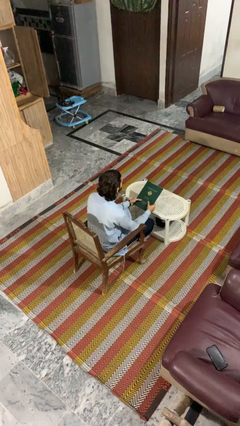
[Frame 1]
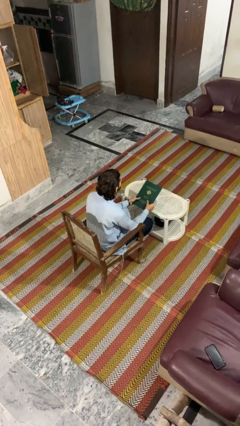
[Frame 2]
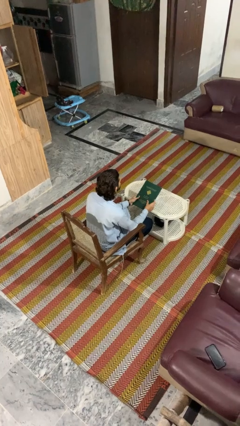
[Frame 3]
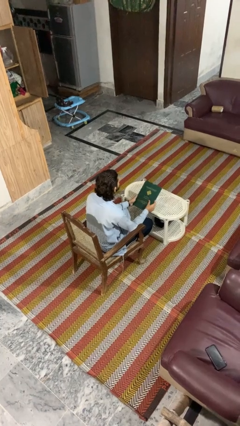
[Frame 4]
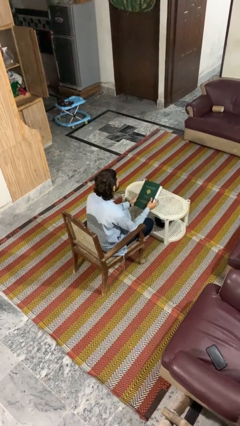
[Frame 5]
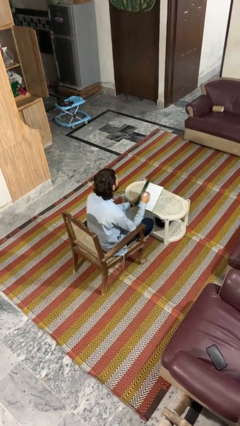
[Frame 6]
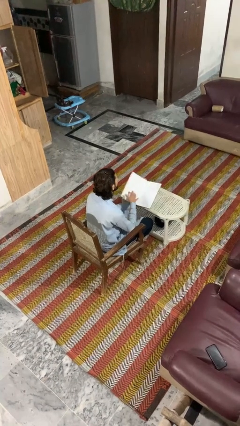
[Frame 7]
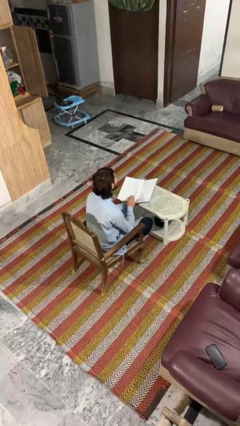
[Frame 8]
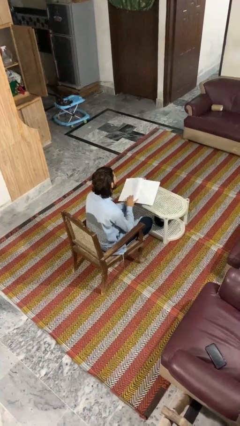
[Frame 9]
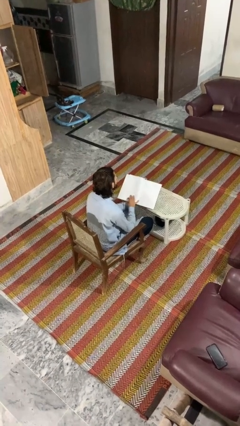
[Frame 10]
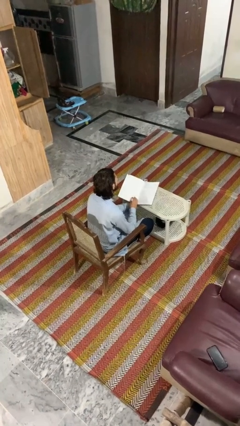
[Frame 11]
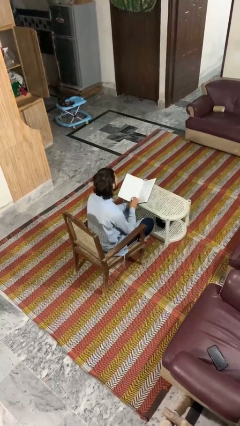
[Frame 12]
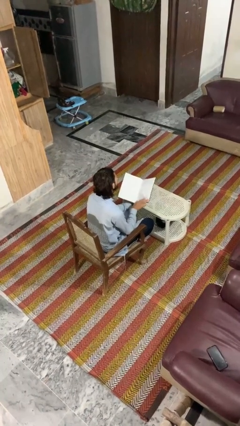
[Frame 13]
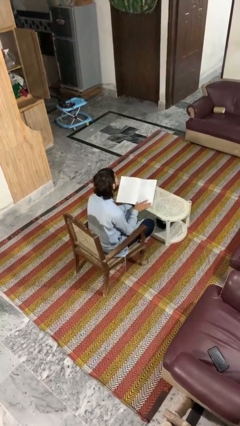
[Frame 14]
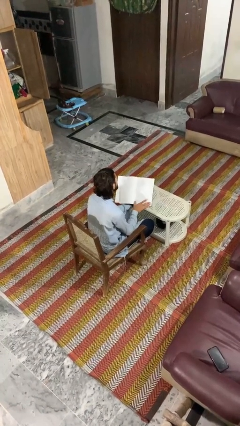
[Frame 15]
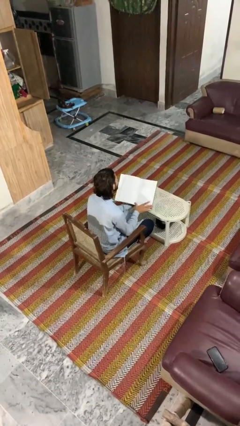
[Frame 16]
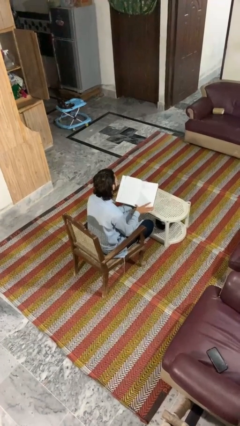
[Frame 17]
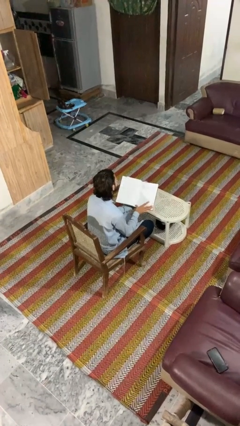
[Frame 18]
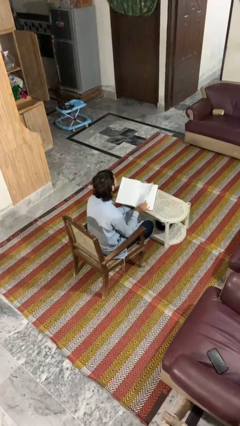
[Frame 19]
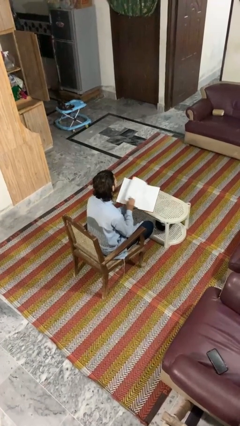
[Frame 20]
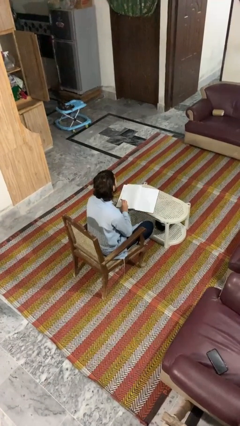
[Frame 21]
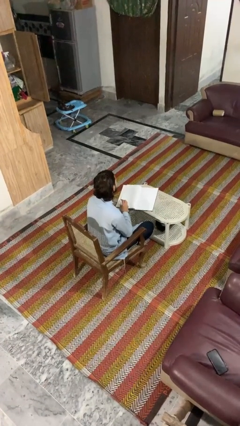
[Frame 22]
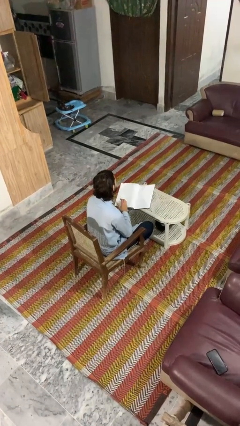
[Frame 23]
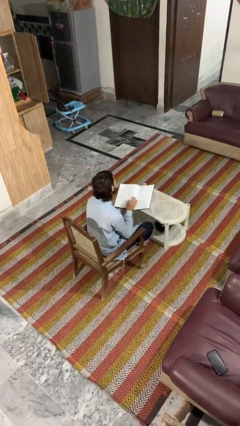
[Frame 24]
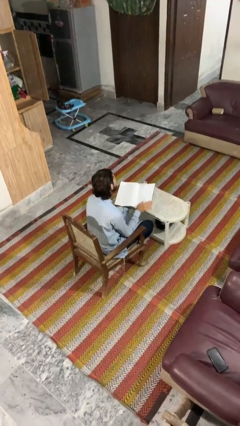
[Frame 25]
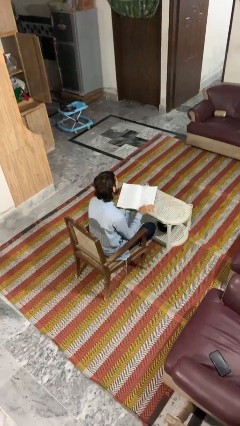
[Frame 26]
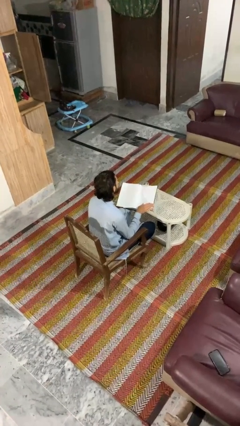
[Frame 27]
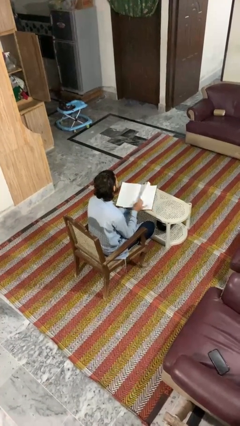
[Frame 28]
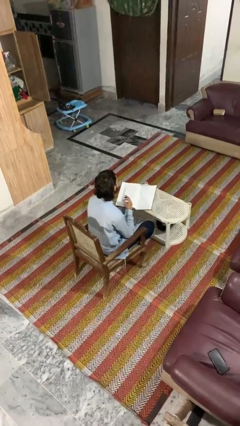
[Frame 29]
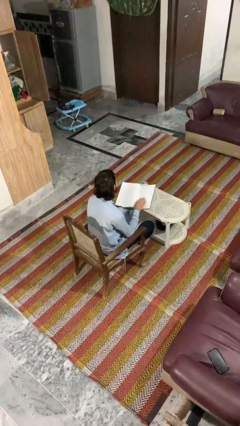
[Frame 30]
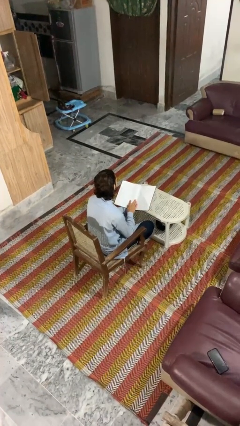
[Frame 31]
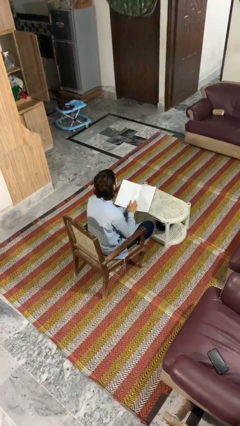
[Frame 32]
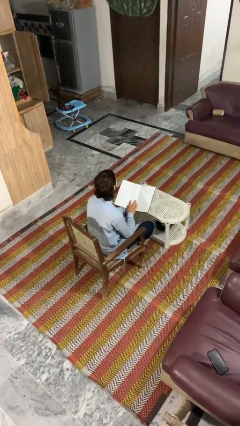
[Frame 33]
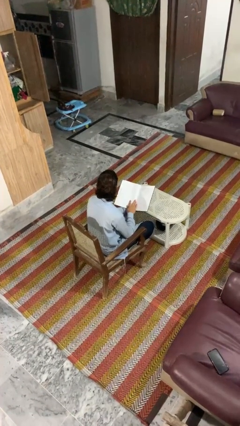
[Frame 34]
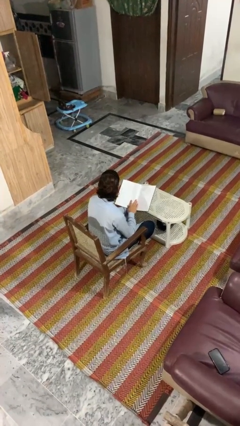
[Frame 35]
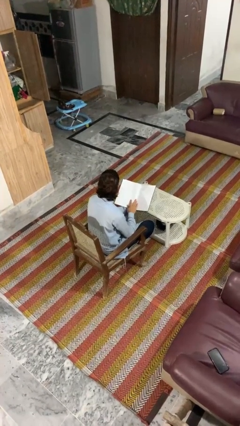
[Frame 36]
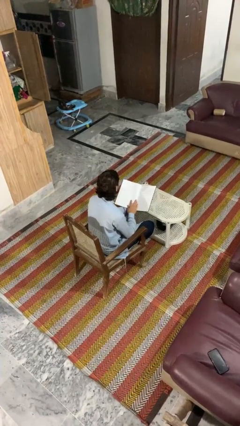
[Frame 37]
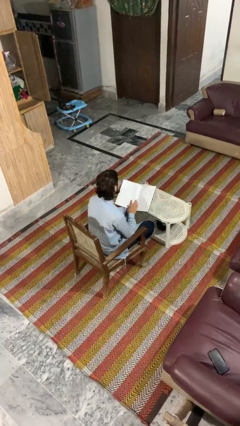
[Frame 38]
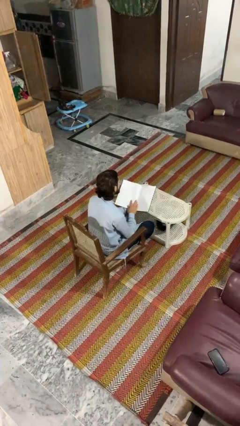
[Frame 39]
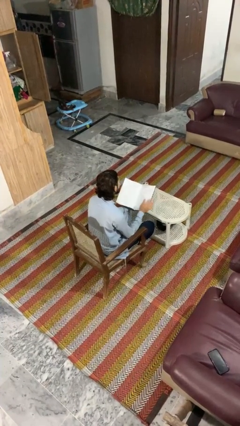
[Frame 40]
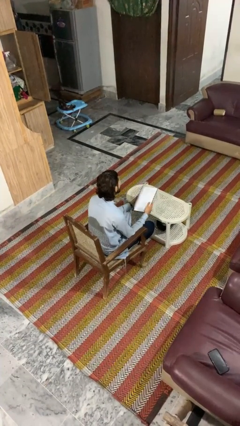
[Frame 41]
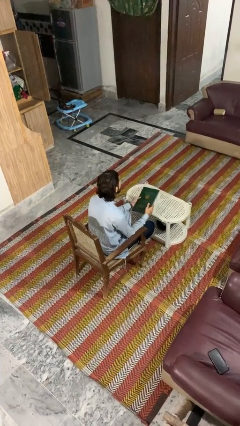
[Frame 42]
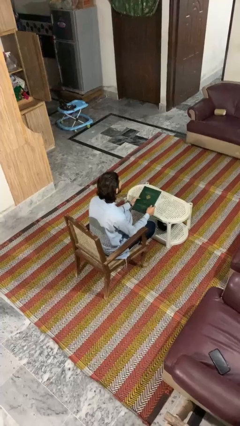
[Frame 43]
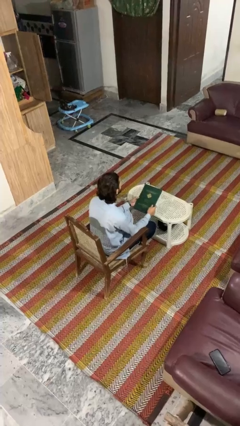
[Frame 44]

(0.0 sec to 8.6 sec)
person reads book

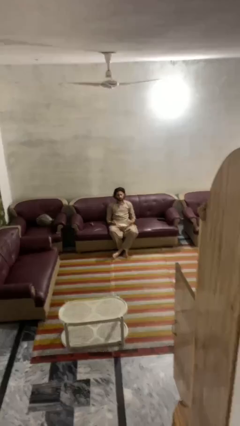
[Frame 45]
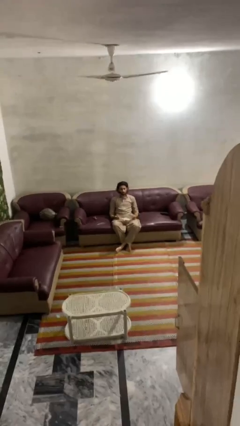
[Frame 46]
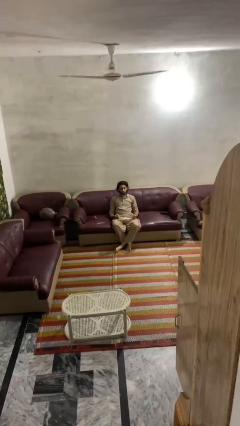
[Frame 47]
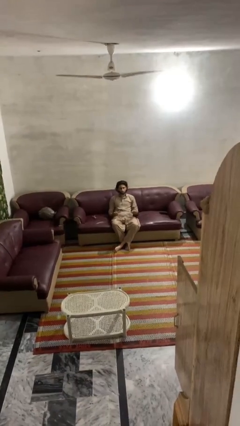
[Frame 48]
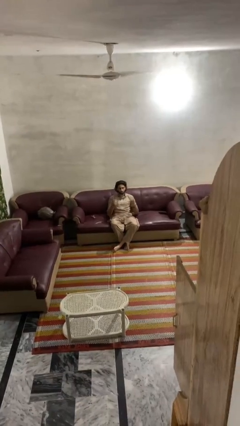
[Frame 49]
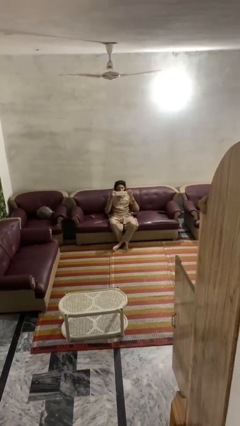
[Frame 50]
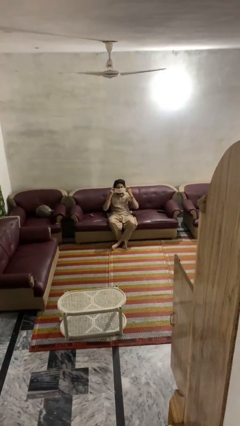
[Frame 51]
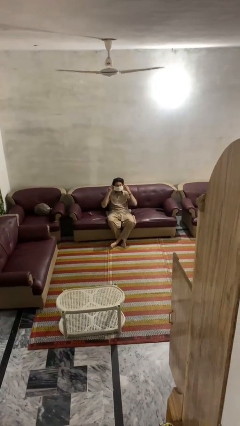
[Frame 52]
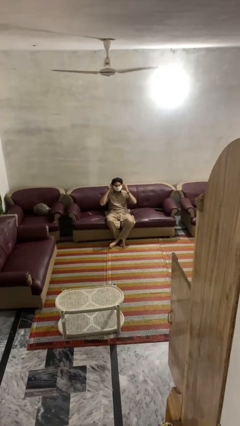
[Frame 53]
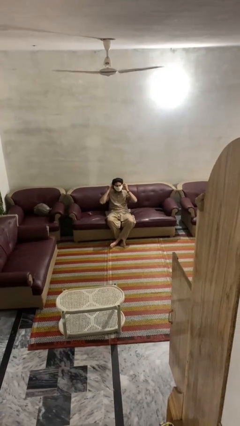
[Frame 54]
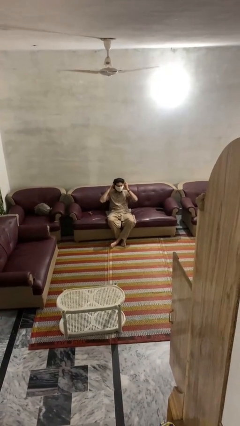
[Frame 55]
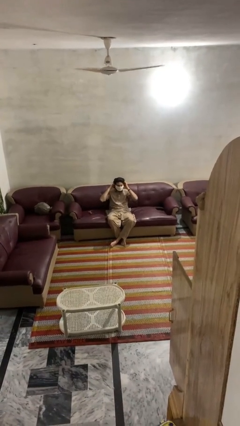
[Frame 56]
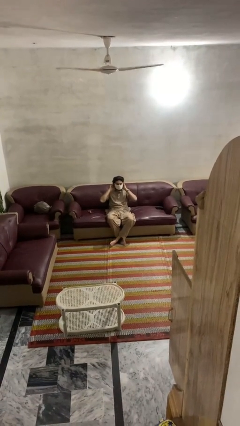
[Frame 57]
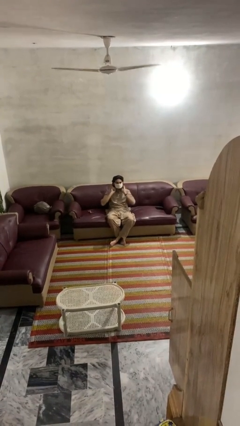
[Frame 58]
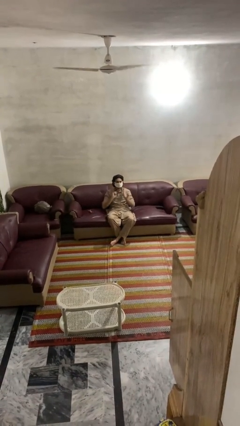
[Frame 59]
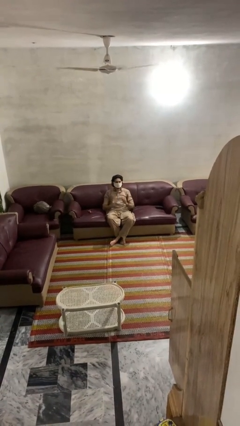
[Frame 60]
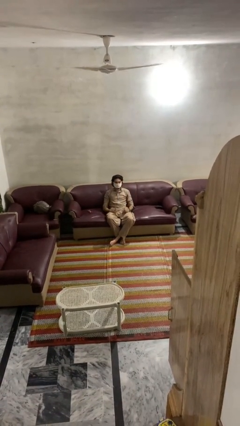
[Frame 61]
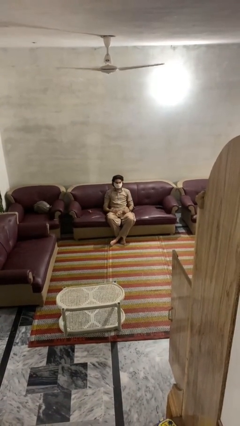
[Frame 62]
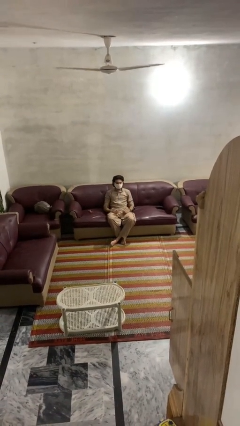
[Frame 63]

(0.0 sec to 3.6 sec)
person puts on facemask

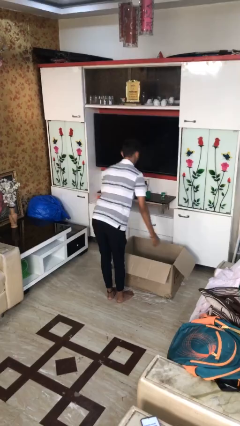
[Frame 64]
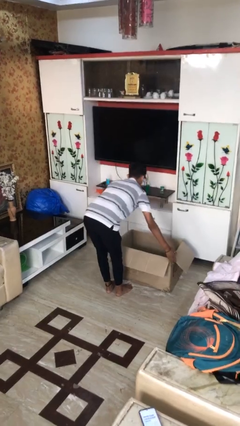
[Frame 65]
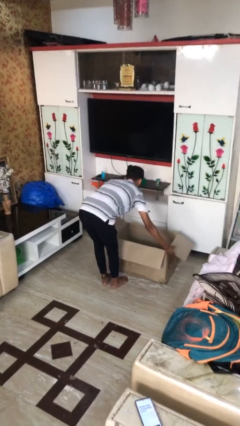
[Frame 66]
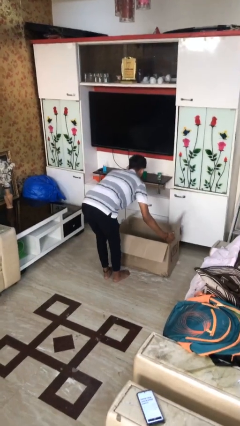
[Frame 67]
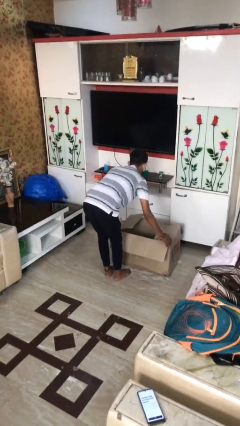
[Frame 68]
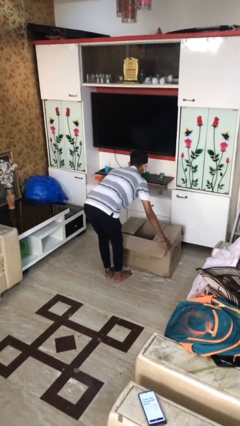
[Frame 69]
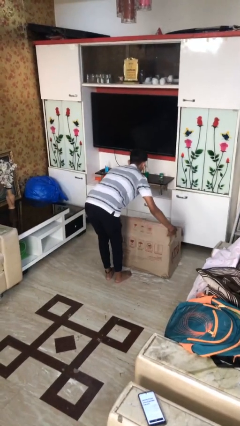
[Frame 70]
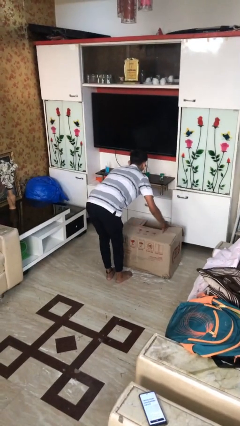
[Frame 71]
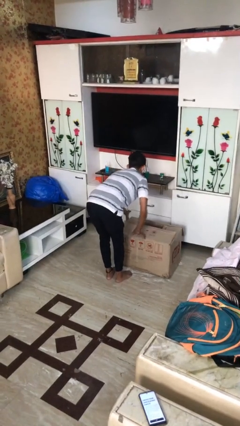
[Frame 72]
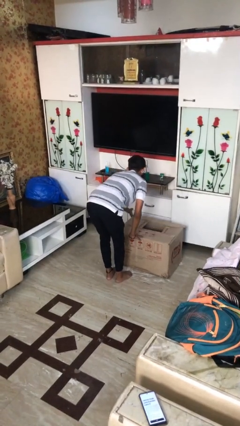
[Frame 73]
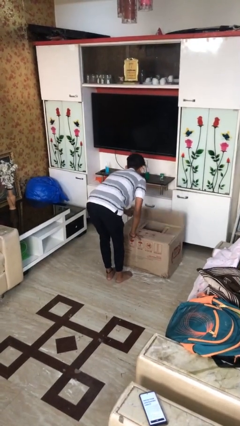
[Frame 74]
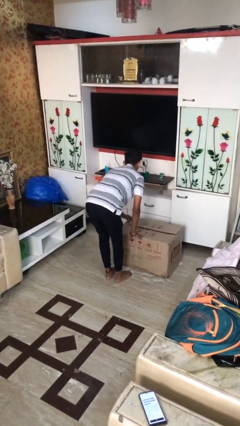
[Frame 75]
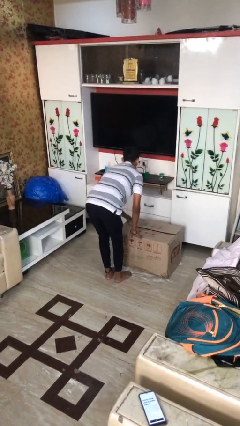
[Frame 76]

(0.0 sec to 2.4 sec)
person closes box

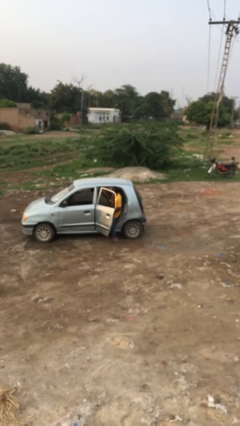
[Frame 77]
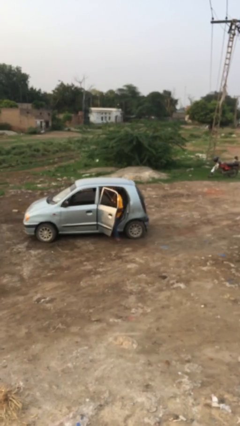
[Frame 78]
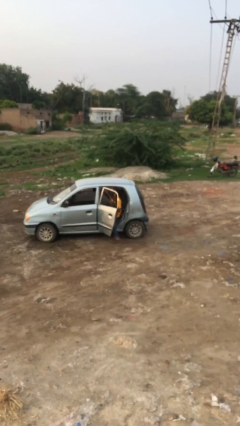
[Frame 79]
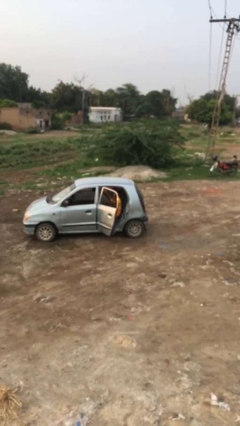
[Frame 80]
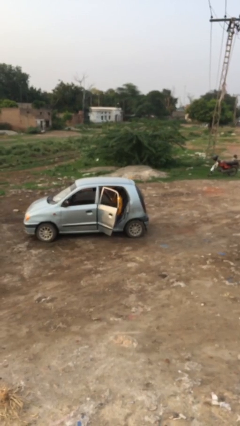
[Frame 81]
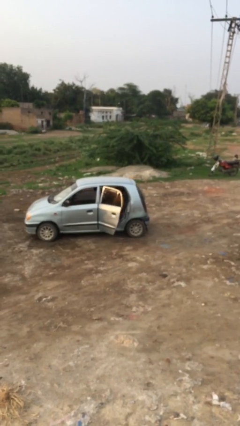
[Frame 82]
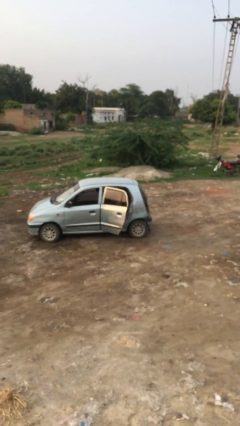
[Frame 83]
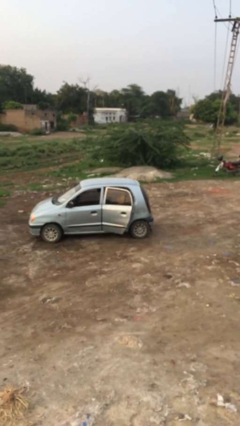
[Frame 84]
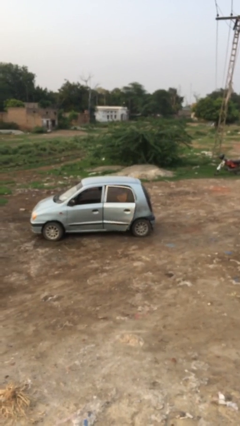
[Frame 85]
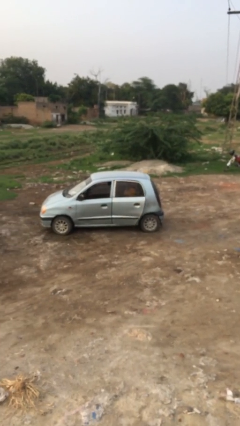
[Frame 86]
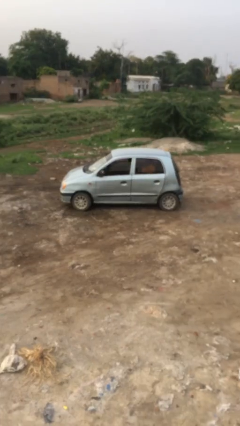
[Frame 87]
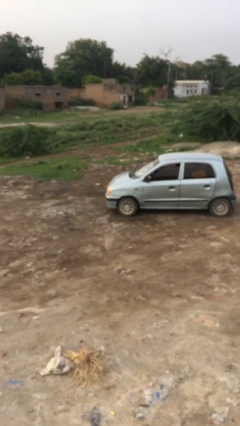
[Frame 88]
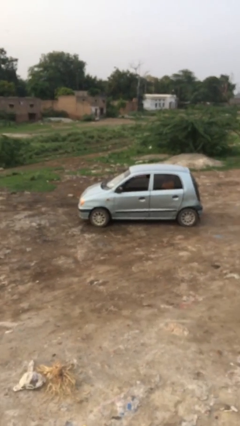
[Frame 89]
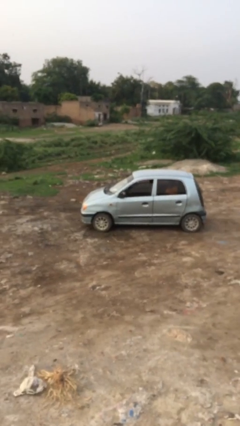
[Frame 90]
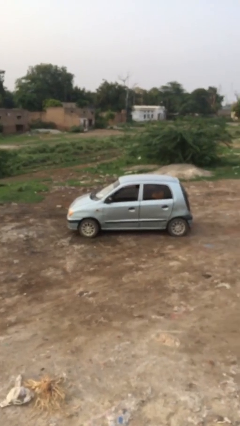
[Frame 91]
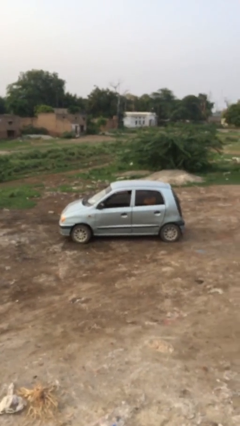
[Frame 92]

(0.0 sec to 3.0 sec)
person closes car door

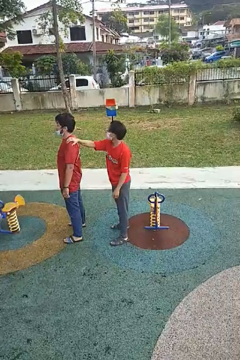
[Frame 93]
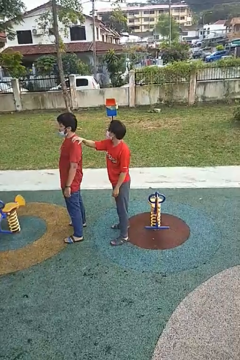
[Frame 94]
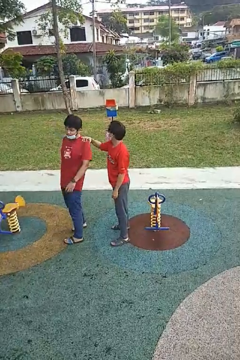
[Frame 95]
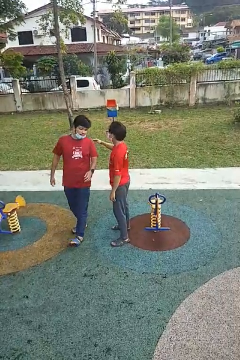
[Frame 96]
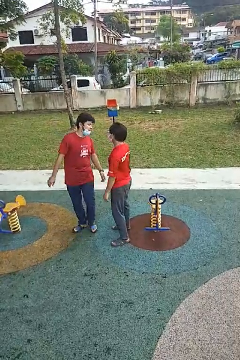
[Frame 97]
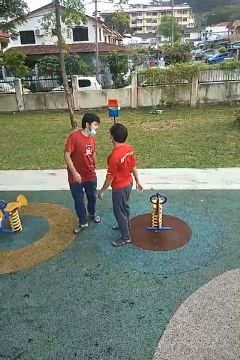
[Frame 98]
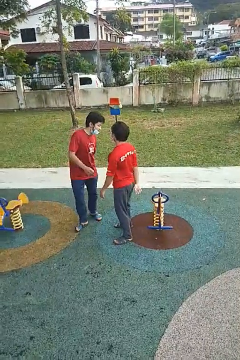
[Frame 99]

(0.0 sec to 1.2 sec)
person spins person around
